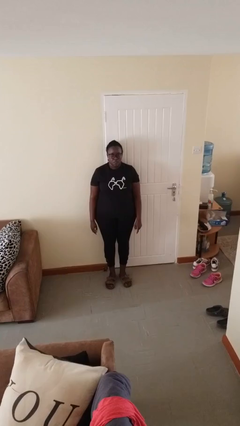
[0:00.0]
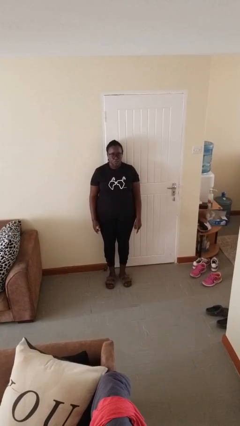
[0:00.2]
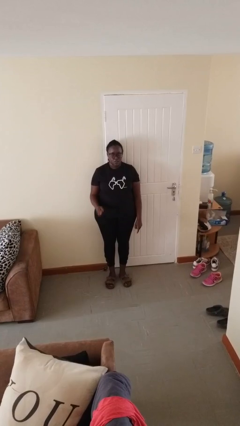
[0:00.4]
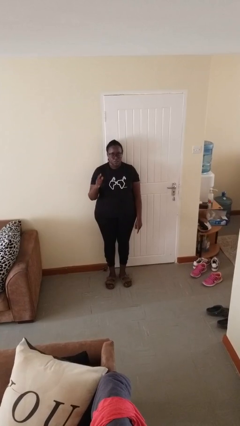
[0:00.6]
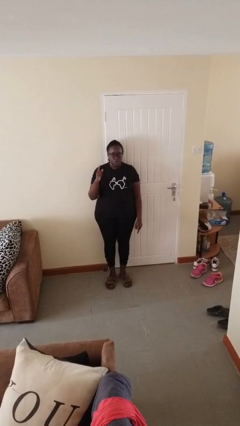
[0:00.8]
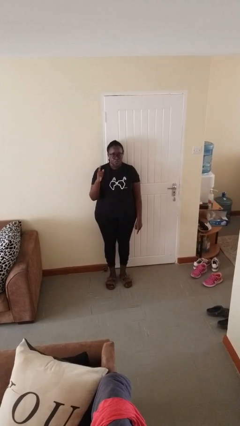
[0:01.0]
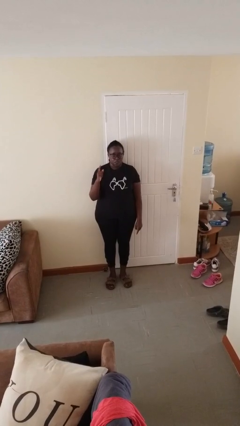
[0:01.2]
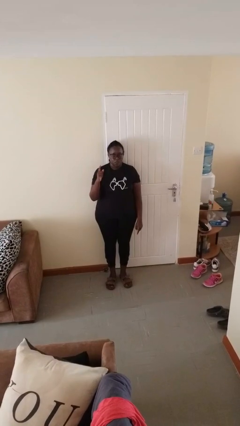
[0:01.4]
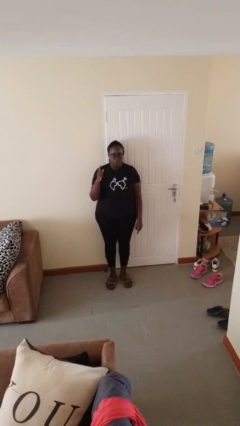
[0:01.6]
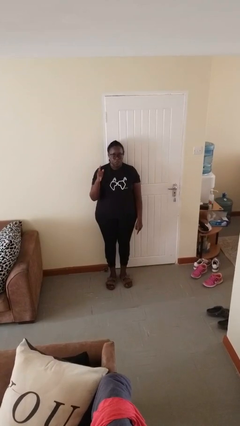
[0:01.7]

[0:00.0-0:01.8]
person gestures number one

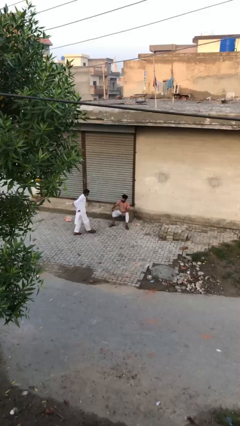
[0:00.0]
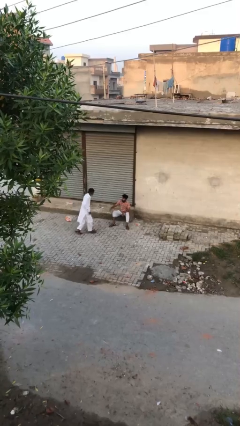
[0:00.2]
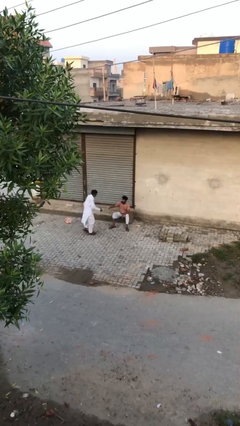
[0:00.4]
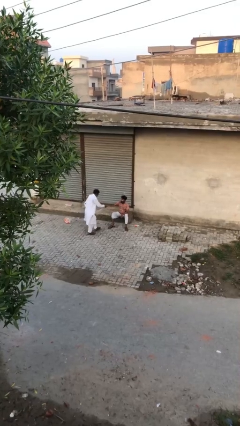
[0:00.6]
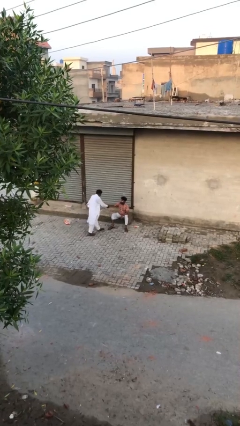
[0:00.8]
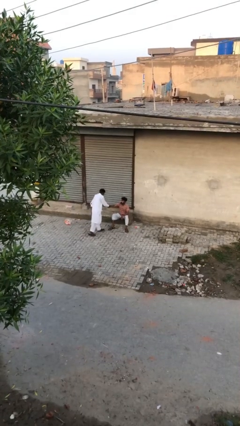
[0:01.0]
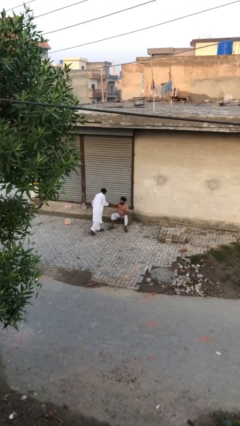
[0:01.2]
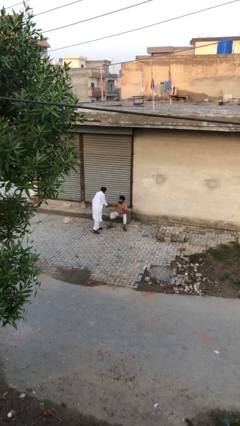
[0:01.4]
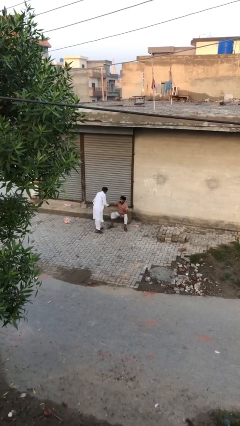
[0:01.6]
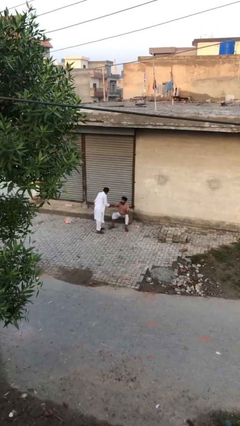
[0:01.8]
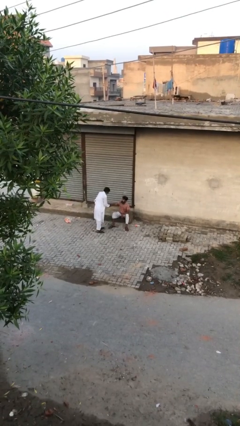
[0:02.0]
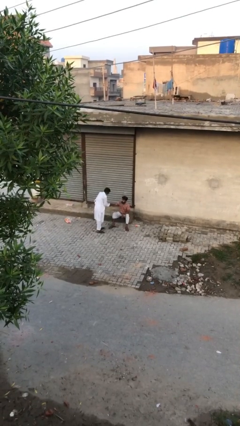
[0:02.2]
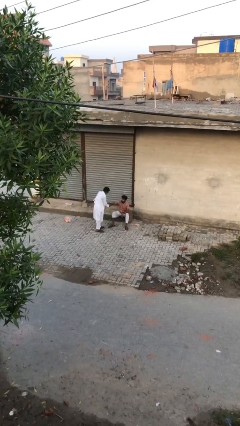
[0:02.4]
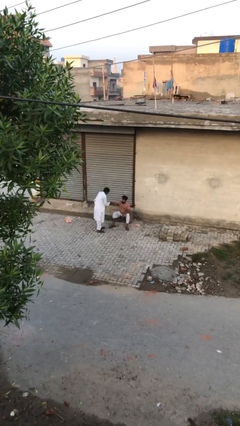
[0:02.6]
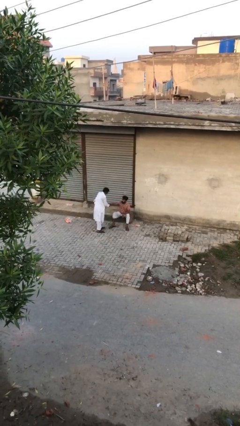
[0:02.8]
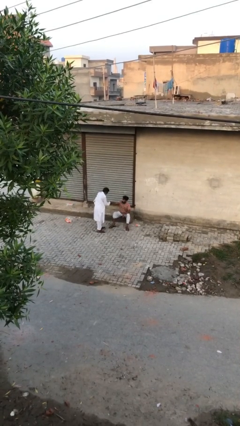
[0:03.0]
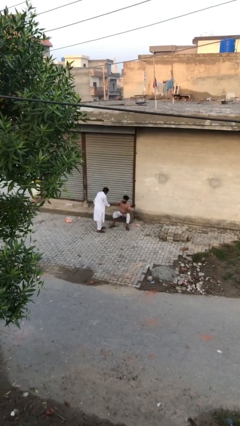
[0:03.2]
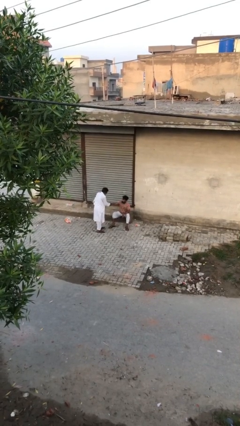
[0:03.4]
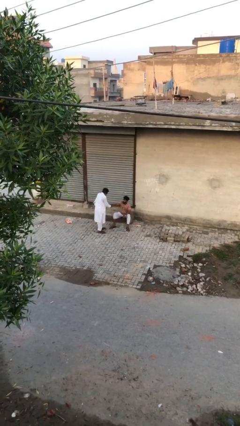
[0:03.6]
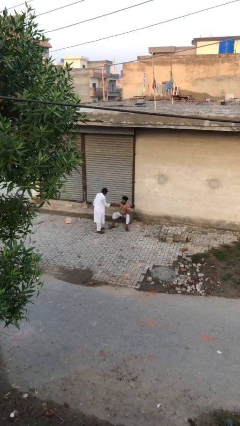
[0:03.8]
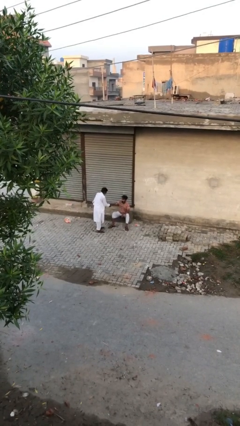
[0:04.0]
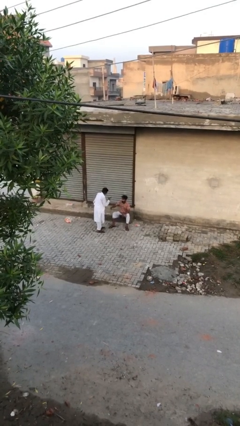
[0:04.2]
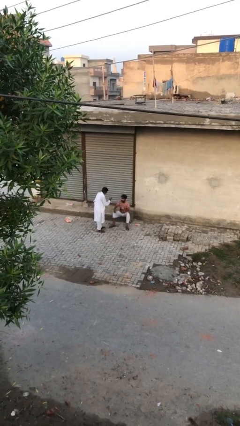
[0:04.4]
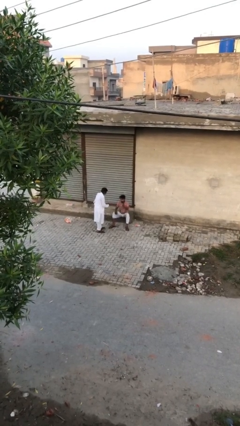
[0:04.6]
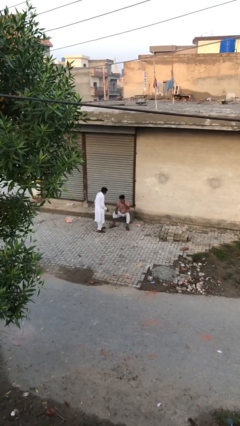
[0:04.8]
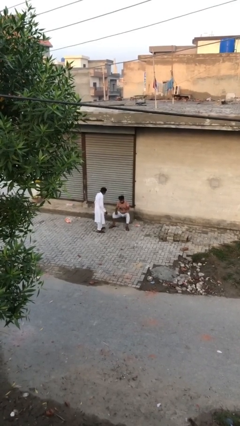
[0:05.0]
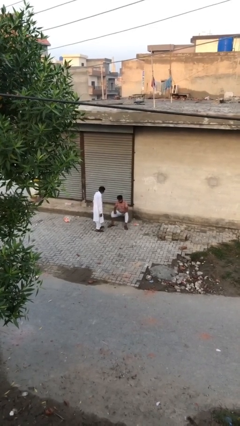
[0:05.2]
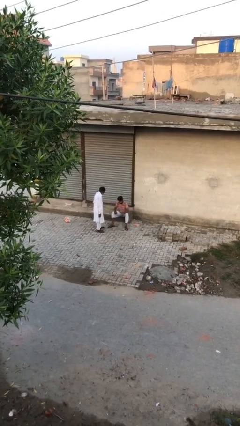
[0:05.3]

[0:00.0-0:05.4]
person shakes hand

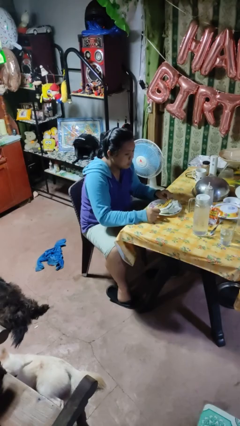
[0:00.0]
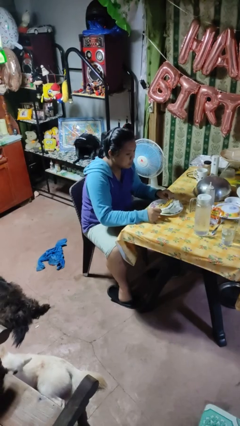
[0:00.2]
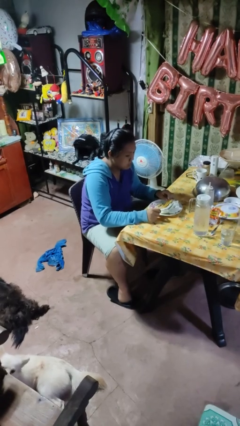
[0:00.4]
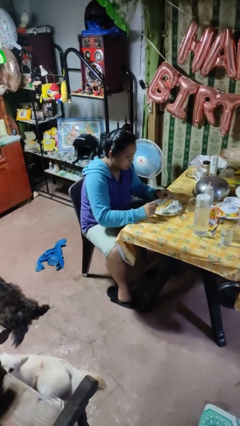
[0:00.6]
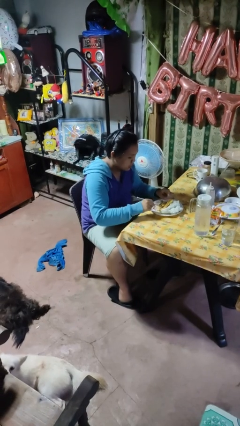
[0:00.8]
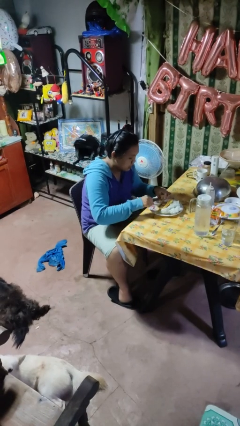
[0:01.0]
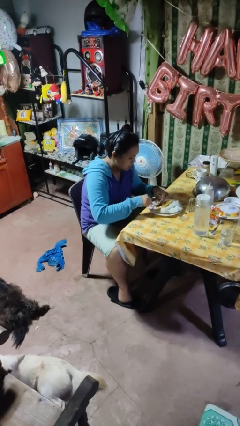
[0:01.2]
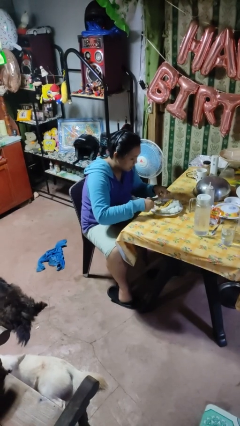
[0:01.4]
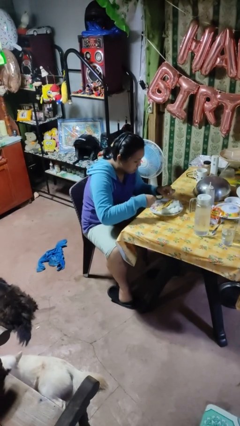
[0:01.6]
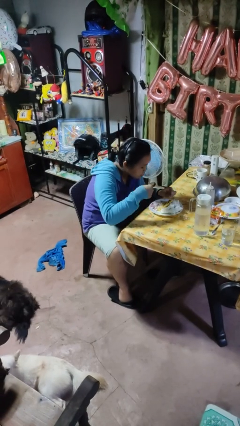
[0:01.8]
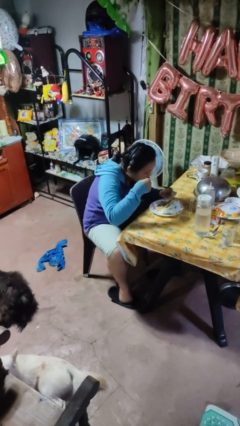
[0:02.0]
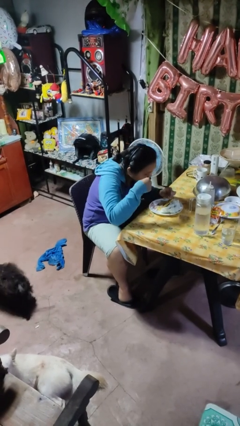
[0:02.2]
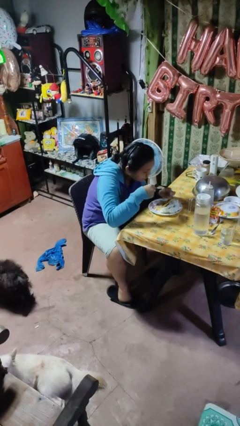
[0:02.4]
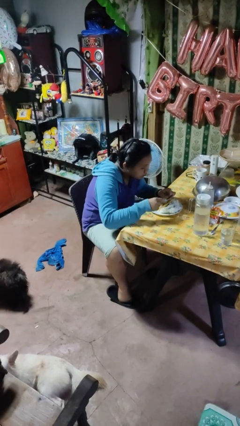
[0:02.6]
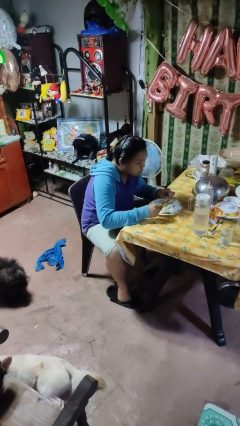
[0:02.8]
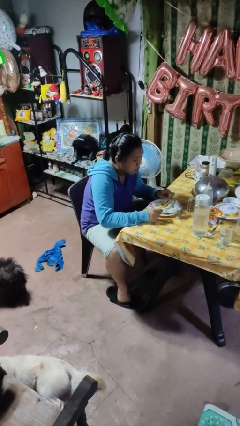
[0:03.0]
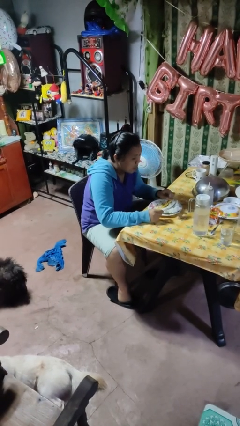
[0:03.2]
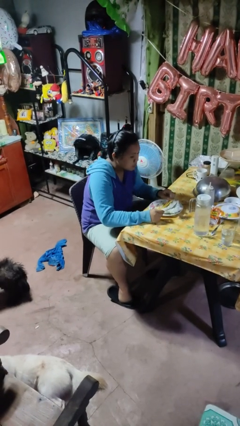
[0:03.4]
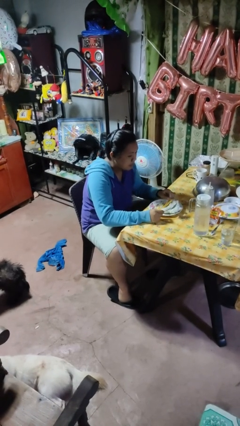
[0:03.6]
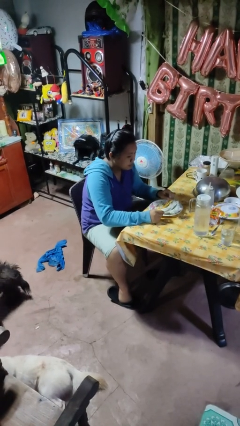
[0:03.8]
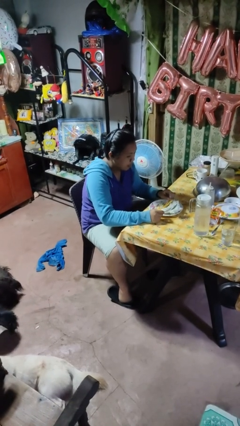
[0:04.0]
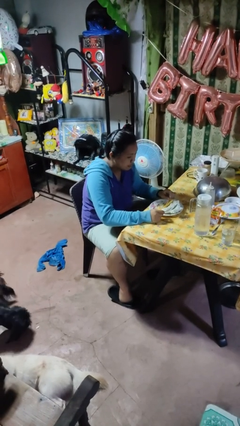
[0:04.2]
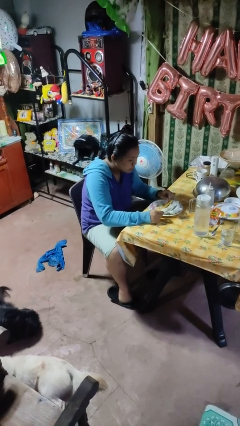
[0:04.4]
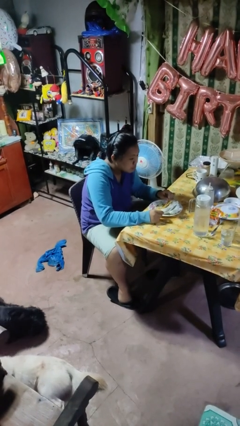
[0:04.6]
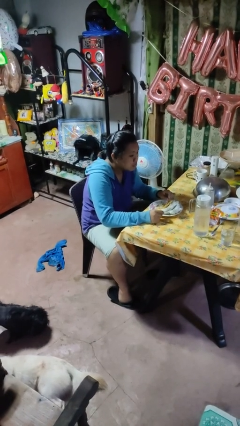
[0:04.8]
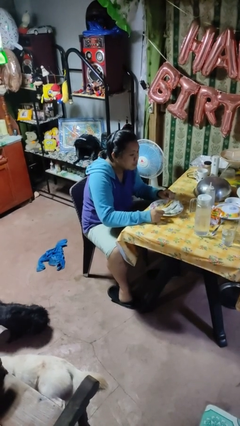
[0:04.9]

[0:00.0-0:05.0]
person eats with utensil

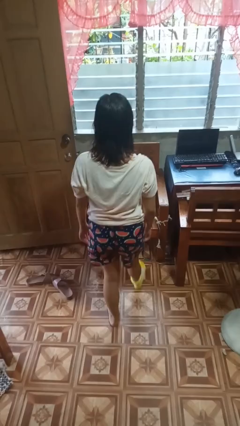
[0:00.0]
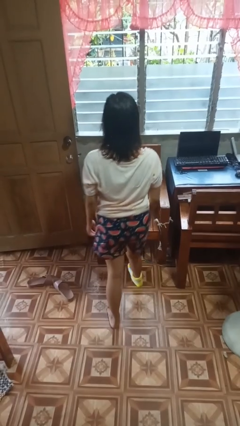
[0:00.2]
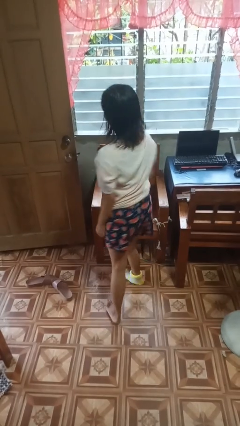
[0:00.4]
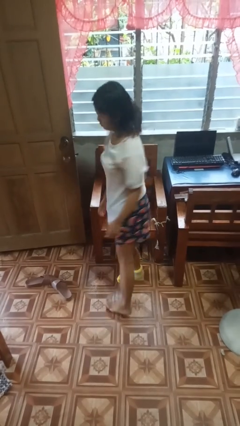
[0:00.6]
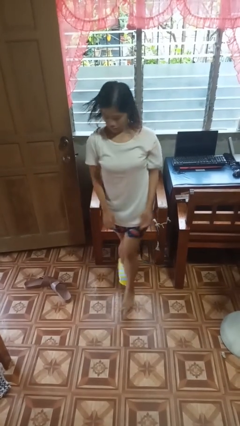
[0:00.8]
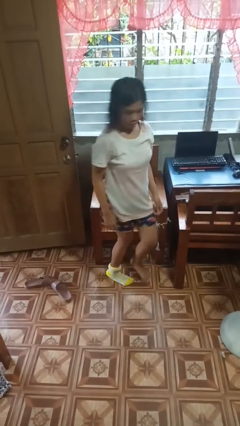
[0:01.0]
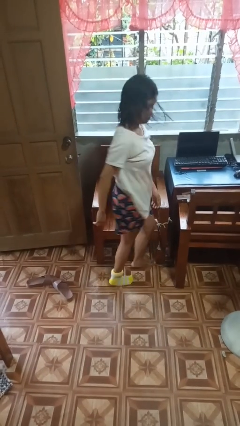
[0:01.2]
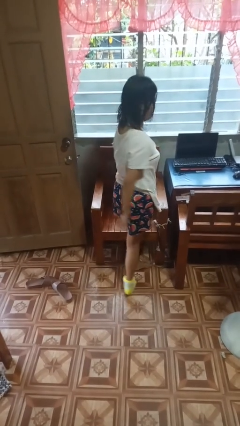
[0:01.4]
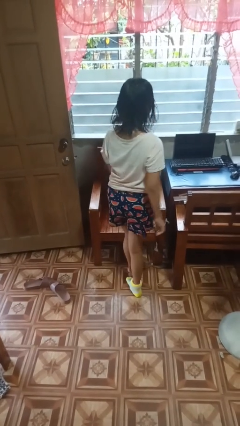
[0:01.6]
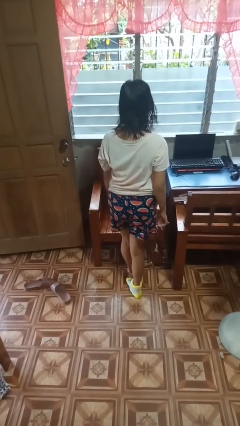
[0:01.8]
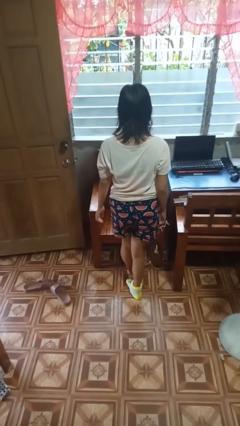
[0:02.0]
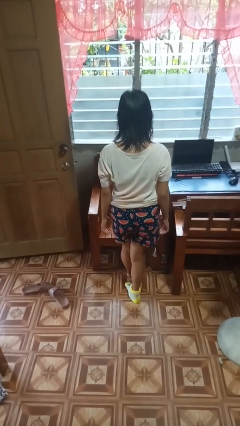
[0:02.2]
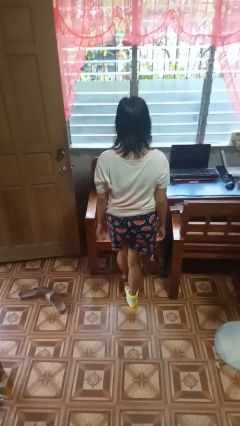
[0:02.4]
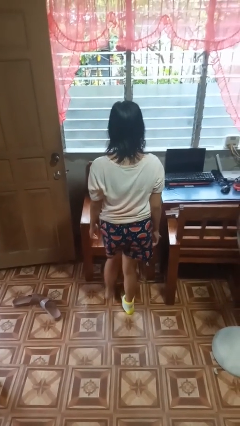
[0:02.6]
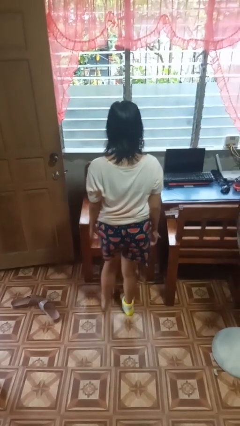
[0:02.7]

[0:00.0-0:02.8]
person twirls

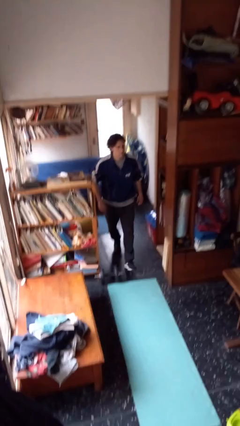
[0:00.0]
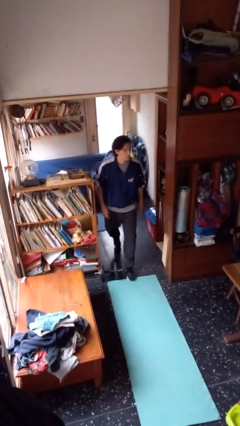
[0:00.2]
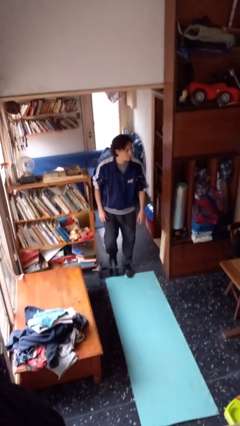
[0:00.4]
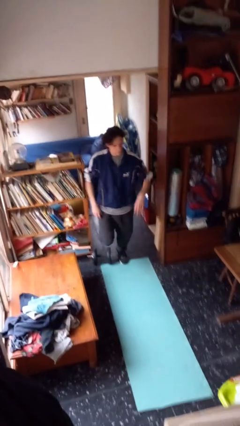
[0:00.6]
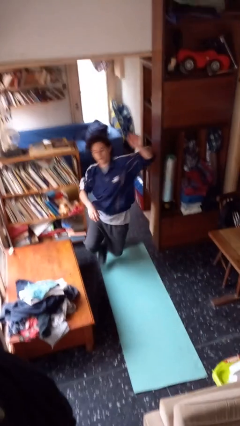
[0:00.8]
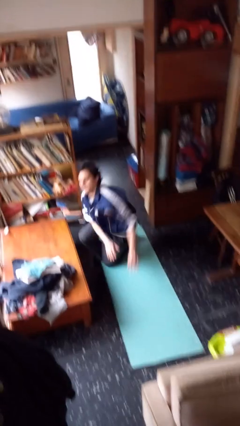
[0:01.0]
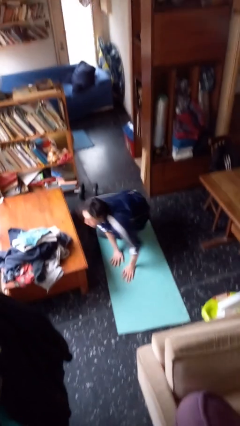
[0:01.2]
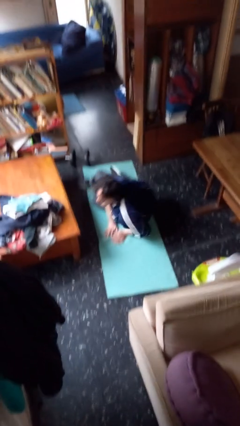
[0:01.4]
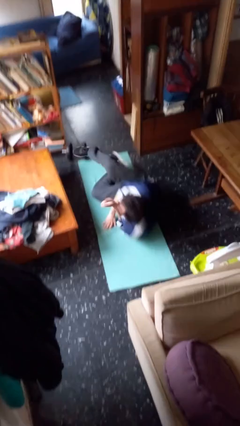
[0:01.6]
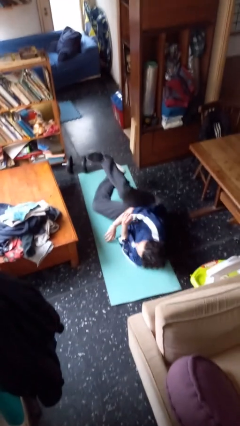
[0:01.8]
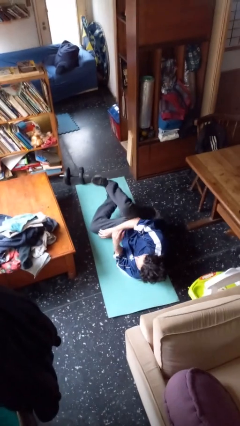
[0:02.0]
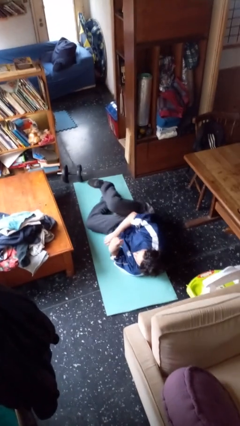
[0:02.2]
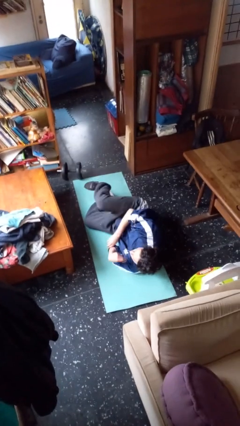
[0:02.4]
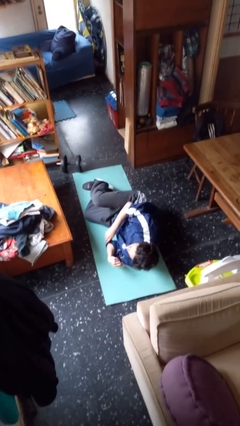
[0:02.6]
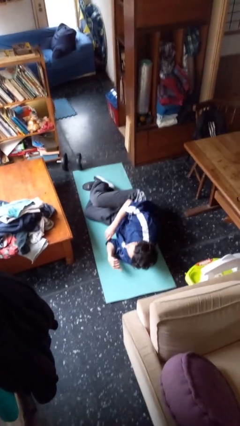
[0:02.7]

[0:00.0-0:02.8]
person trips on object on floor
